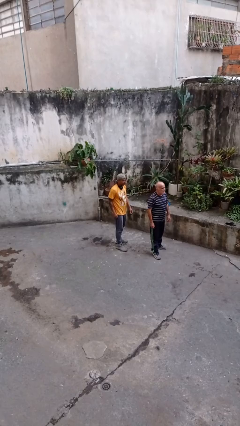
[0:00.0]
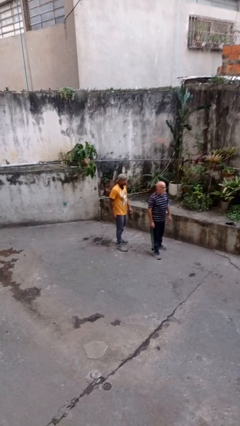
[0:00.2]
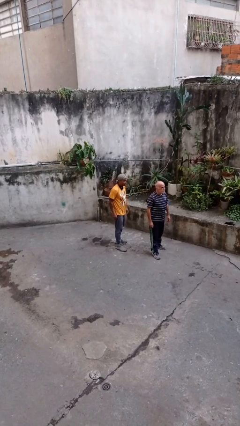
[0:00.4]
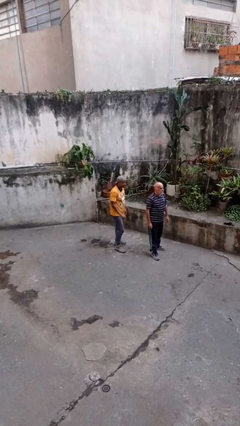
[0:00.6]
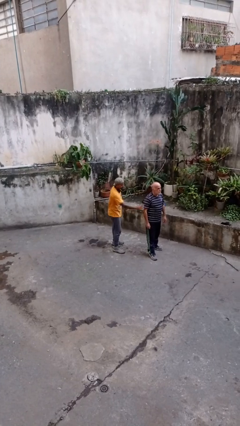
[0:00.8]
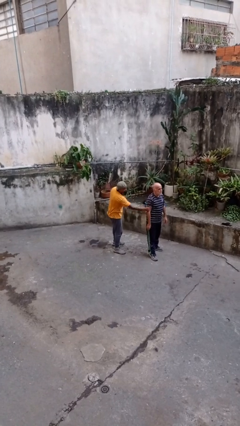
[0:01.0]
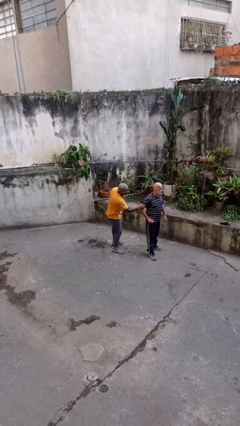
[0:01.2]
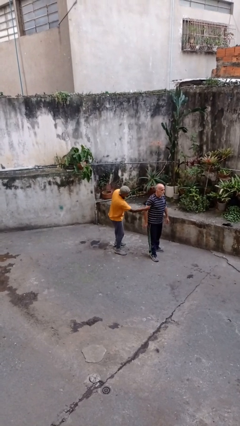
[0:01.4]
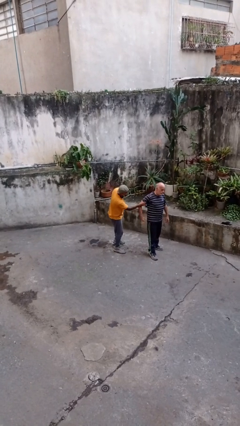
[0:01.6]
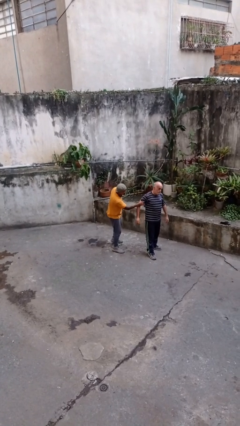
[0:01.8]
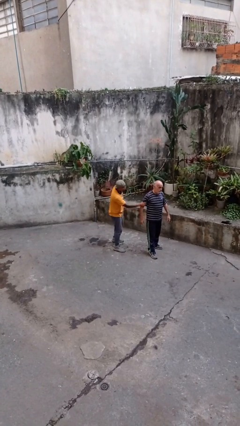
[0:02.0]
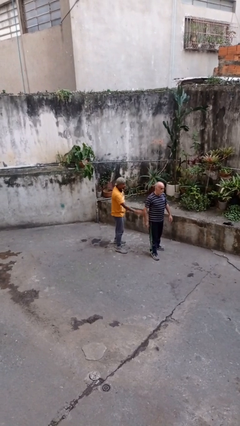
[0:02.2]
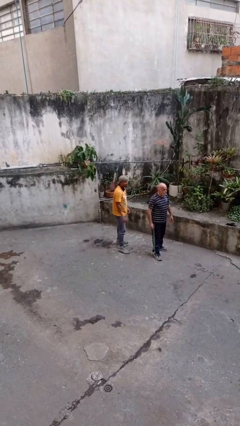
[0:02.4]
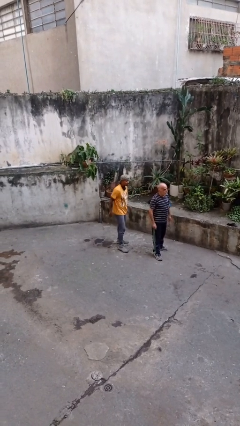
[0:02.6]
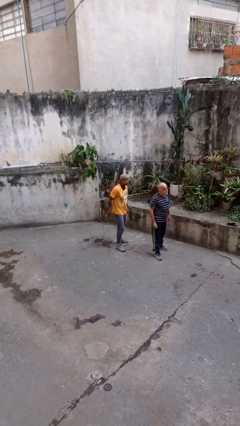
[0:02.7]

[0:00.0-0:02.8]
person grabs person by bicep

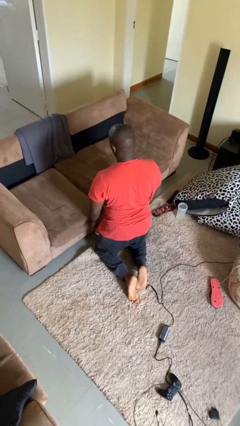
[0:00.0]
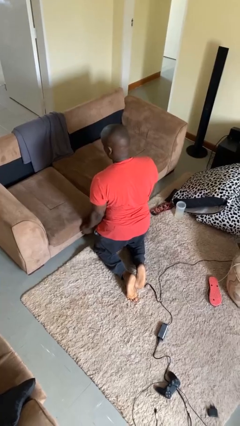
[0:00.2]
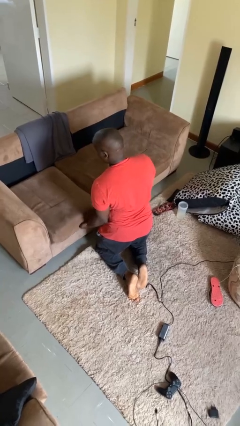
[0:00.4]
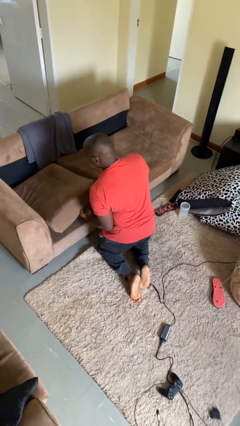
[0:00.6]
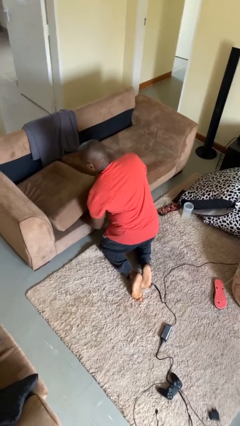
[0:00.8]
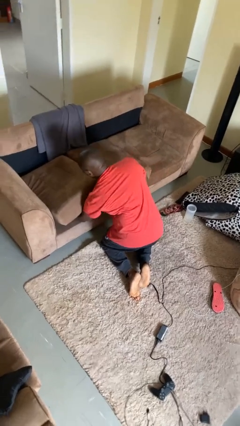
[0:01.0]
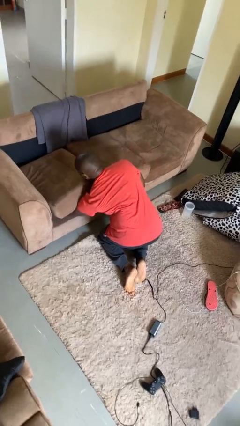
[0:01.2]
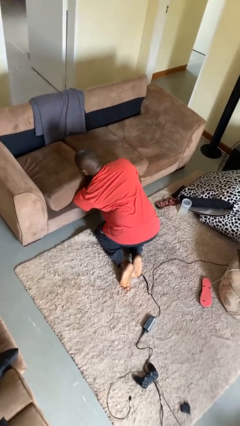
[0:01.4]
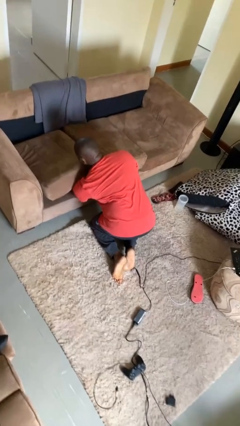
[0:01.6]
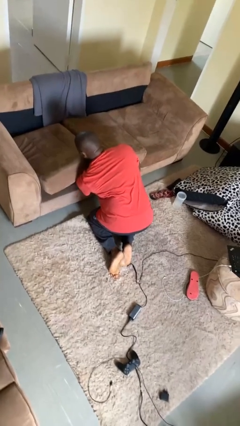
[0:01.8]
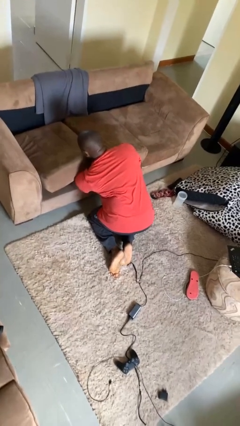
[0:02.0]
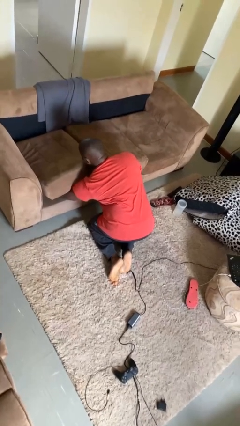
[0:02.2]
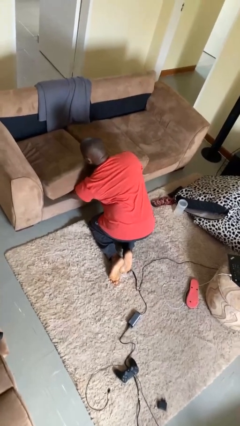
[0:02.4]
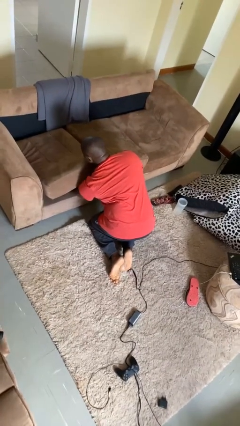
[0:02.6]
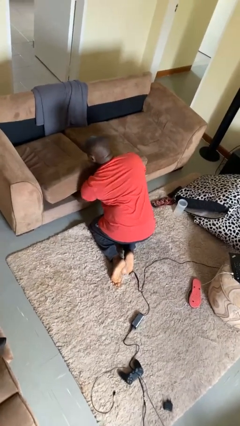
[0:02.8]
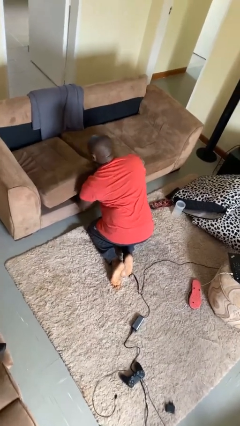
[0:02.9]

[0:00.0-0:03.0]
person searches under couch

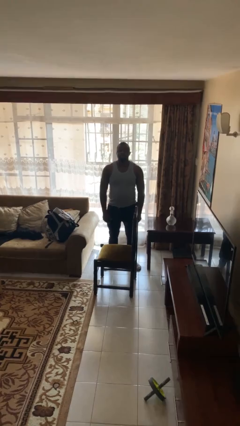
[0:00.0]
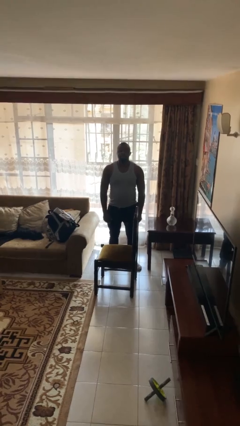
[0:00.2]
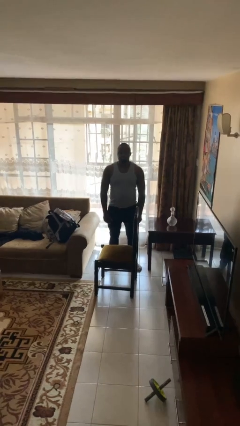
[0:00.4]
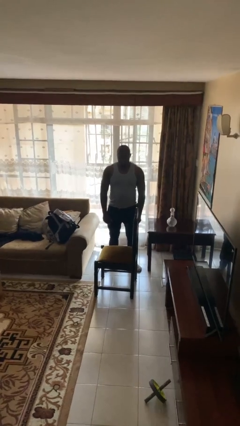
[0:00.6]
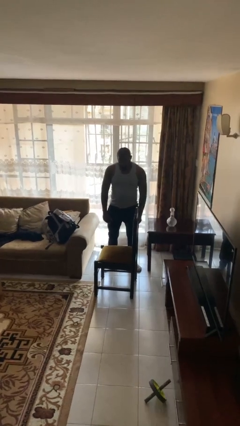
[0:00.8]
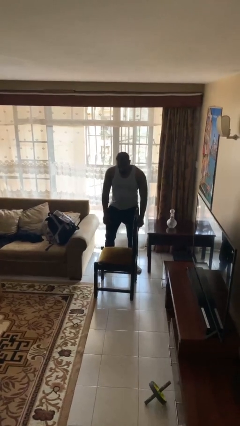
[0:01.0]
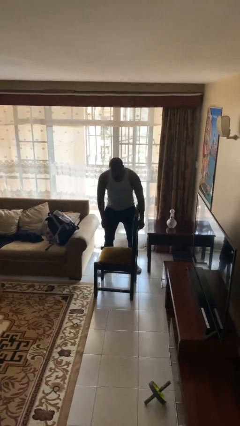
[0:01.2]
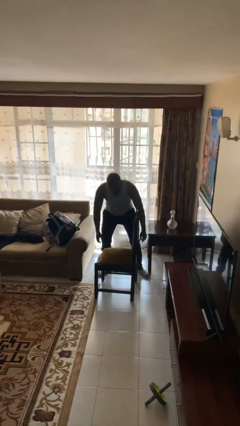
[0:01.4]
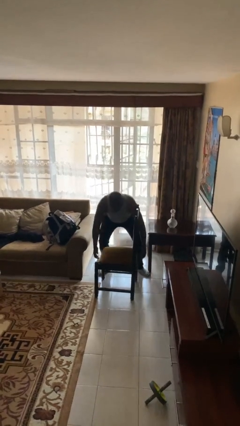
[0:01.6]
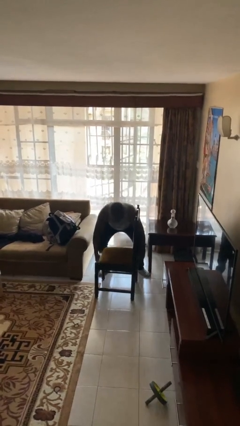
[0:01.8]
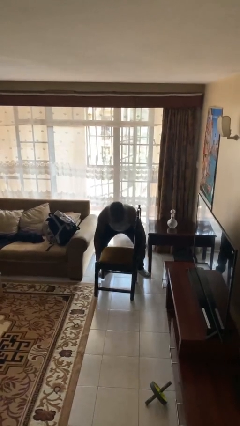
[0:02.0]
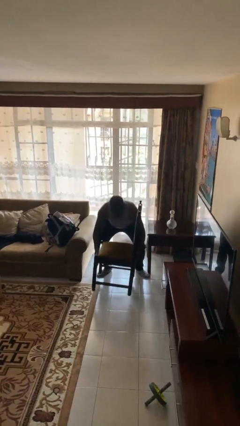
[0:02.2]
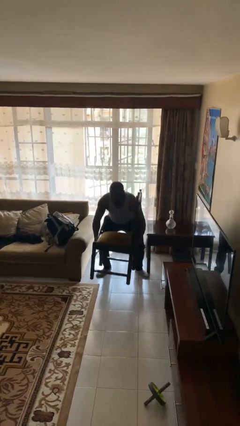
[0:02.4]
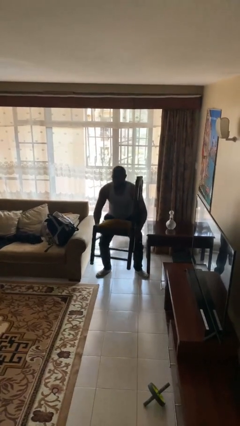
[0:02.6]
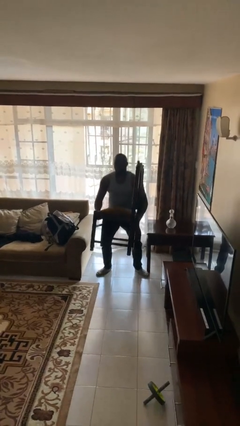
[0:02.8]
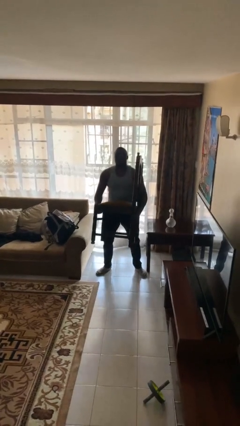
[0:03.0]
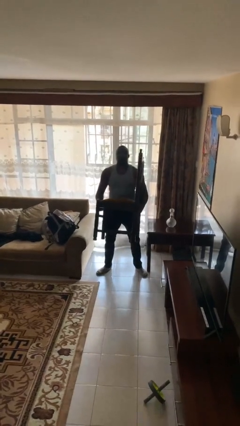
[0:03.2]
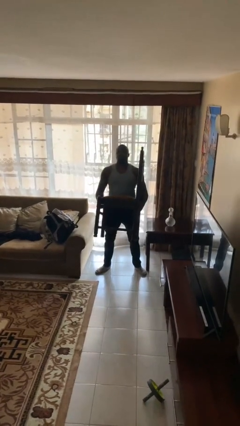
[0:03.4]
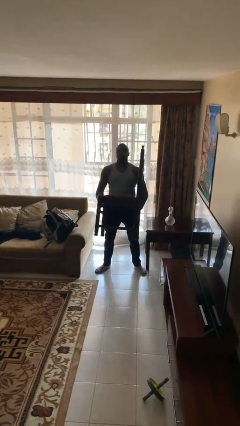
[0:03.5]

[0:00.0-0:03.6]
person picks up object from floor

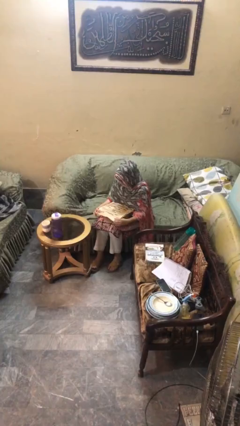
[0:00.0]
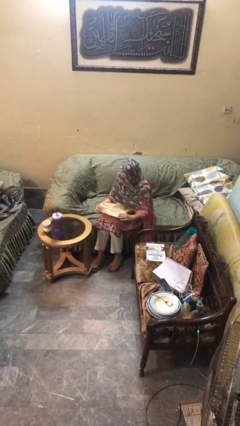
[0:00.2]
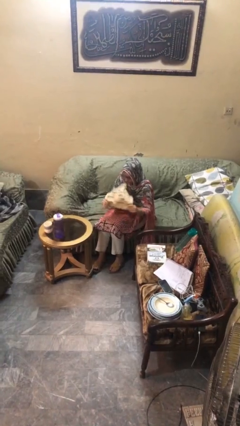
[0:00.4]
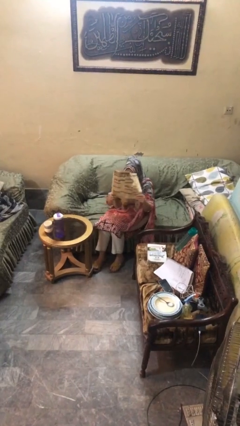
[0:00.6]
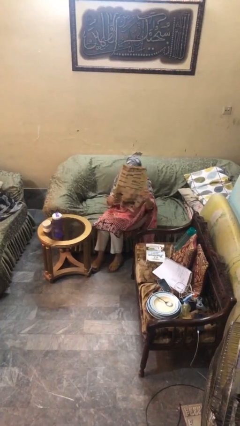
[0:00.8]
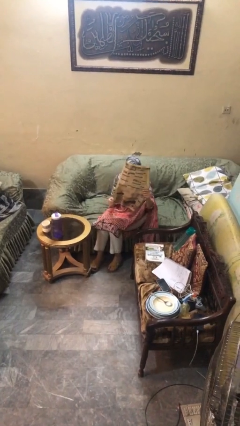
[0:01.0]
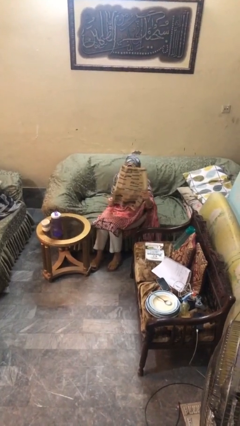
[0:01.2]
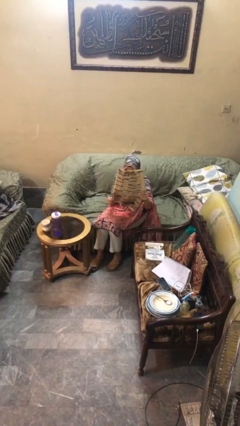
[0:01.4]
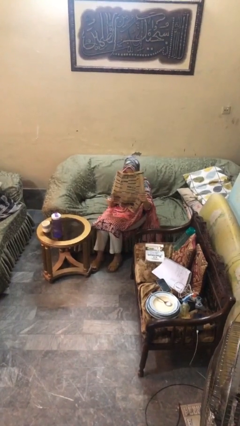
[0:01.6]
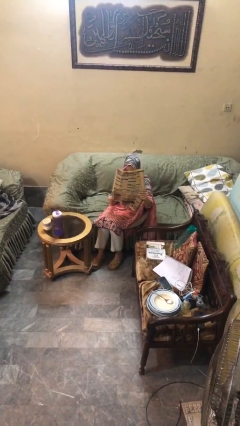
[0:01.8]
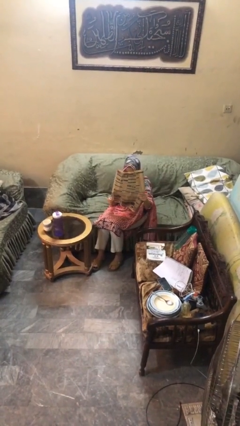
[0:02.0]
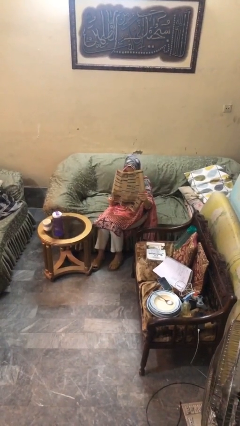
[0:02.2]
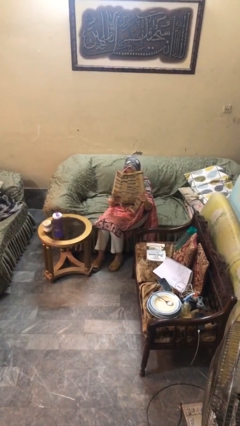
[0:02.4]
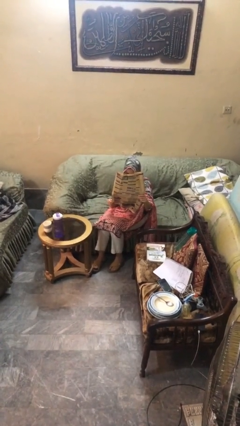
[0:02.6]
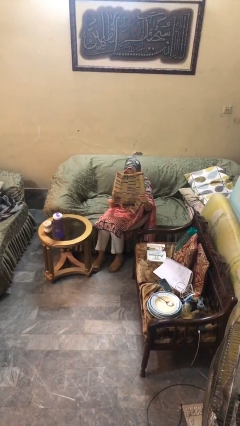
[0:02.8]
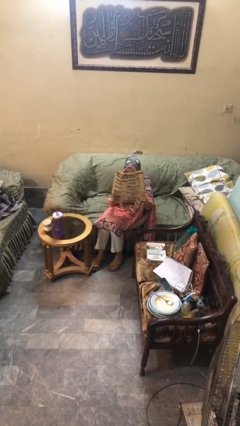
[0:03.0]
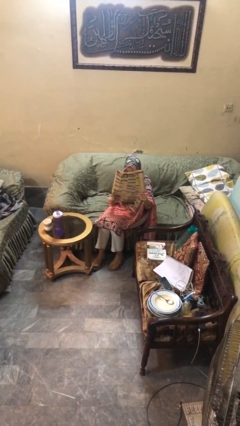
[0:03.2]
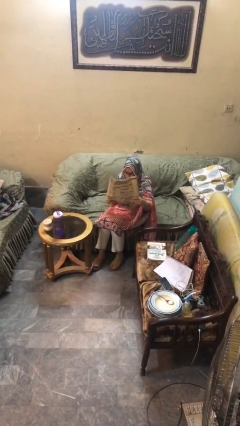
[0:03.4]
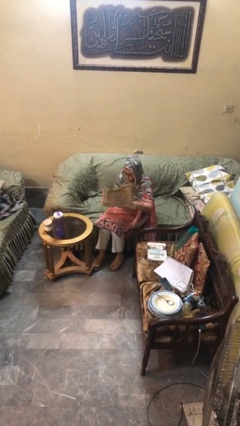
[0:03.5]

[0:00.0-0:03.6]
person reads newspaper

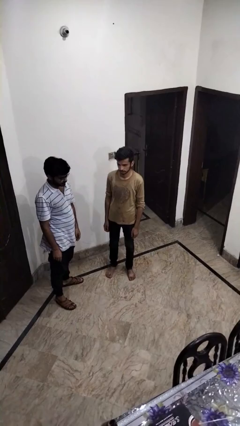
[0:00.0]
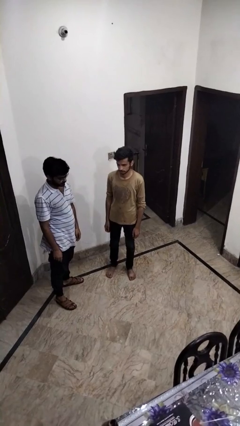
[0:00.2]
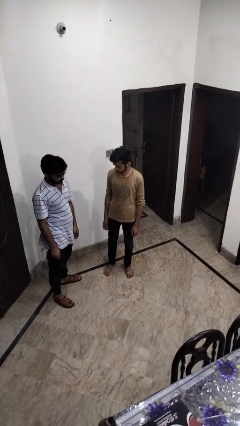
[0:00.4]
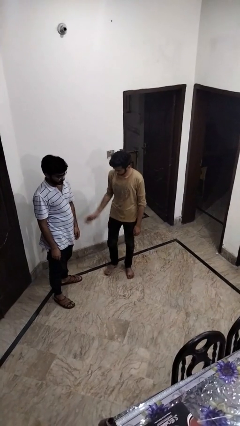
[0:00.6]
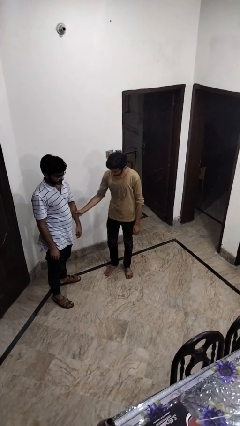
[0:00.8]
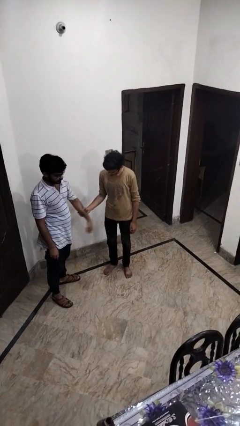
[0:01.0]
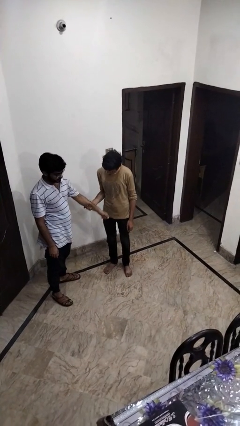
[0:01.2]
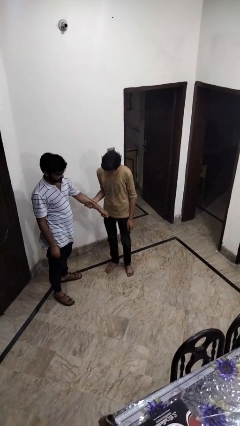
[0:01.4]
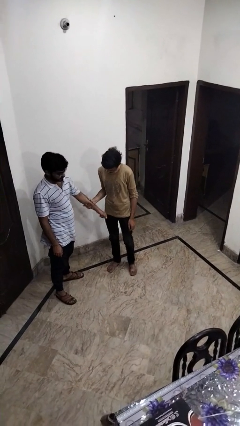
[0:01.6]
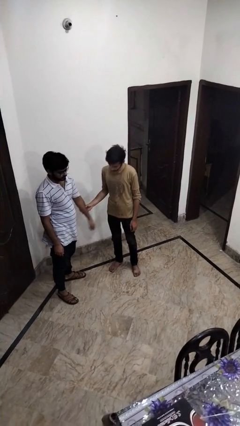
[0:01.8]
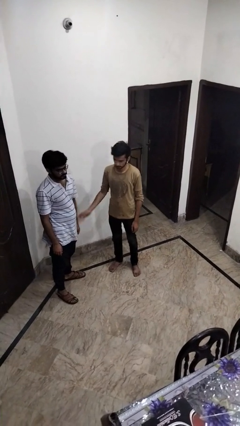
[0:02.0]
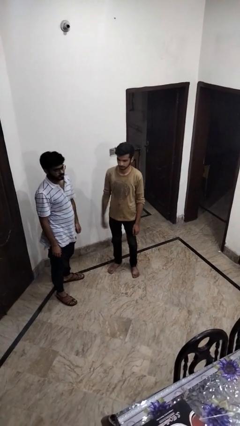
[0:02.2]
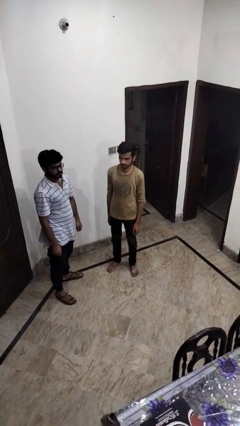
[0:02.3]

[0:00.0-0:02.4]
person grabs person by forearm

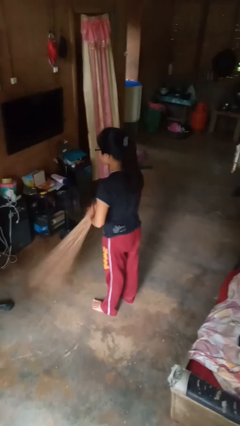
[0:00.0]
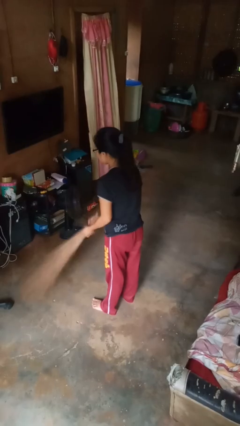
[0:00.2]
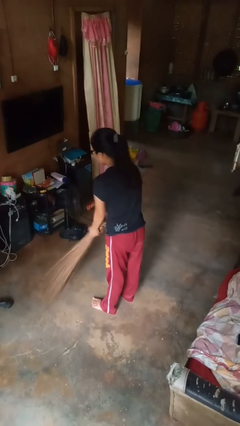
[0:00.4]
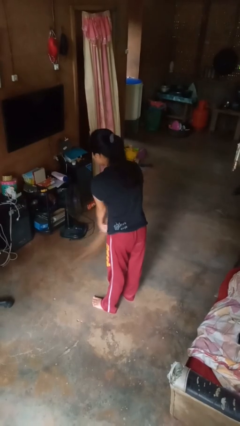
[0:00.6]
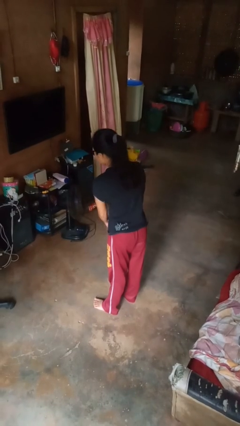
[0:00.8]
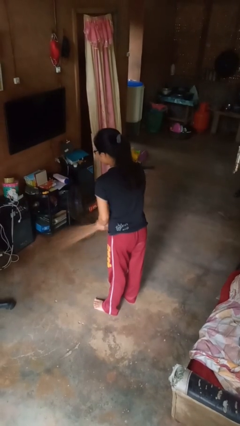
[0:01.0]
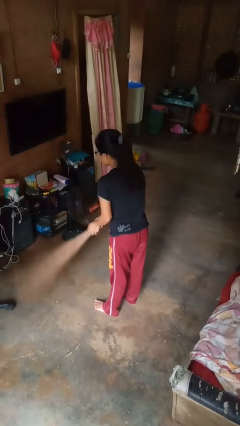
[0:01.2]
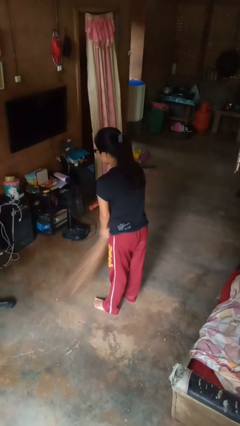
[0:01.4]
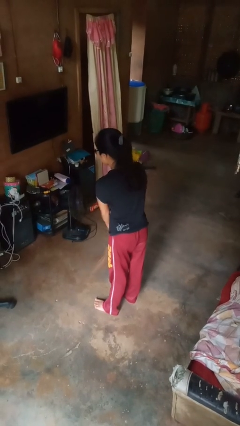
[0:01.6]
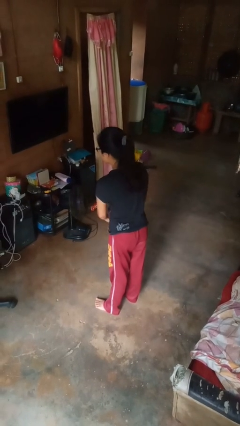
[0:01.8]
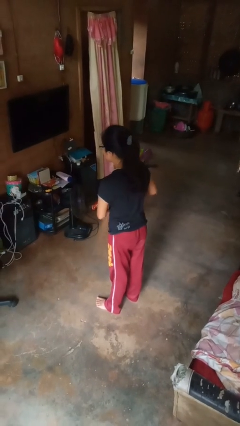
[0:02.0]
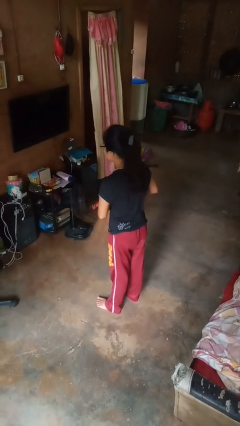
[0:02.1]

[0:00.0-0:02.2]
person sweeps floor
